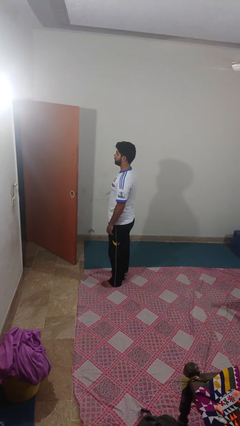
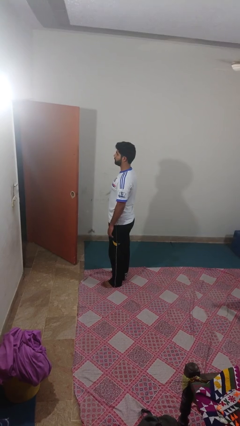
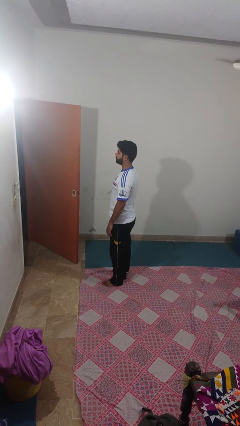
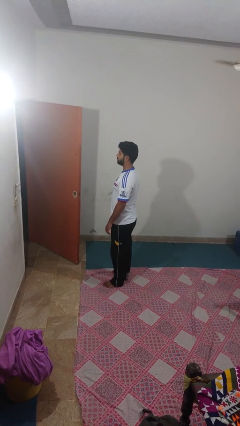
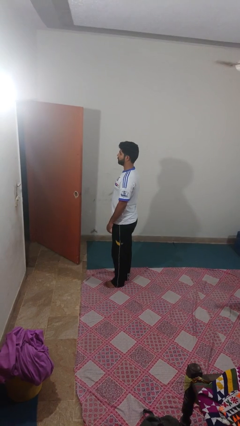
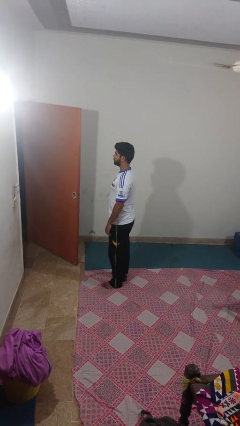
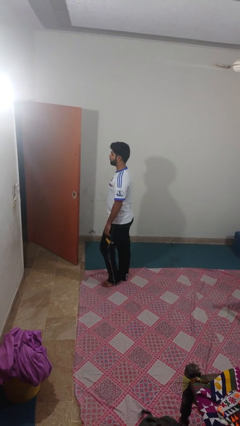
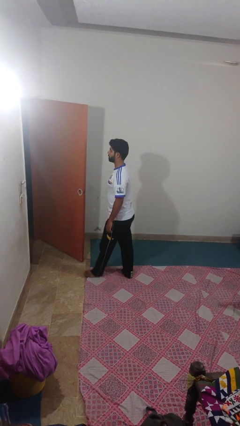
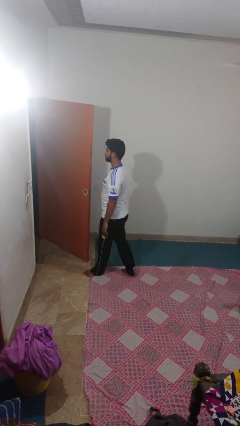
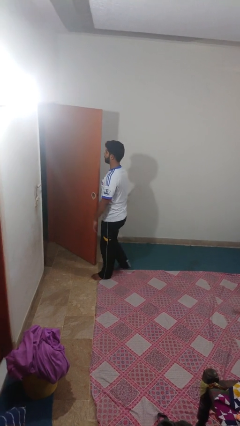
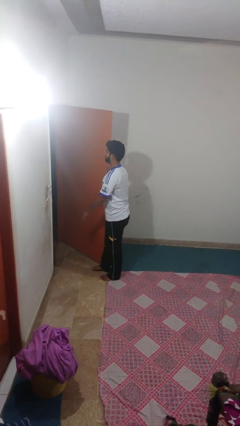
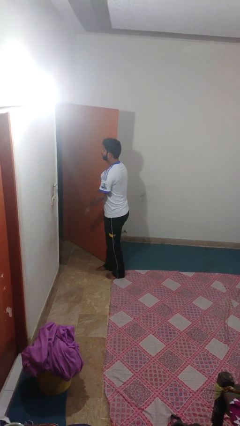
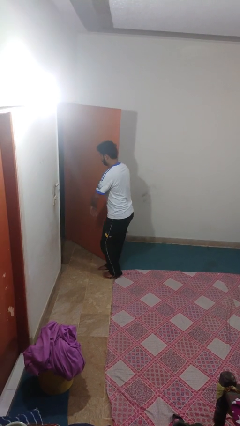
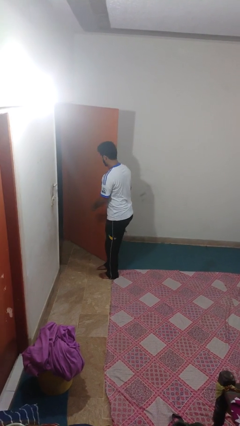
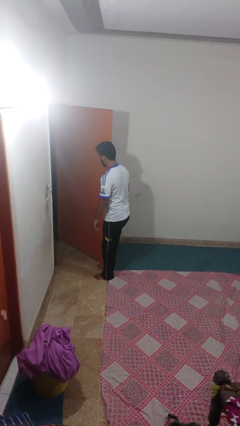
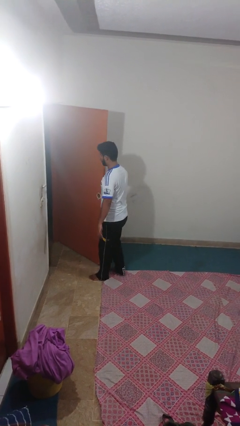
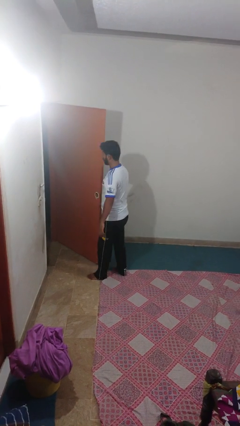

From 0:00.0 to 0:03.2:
person bumps into wall

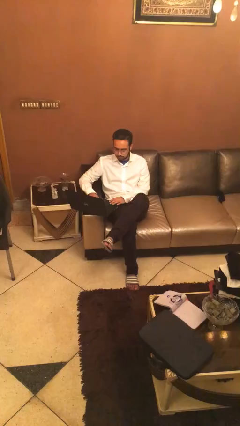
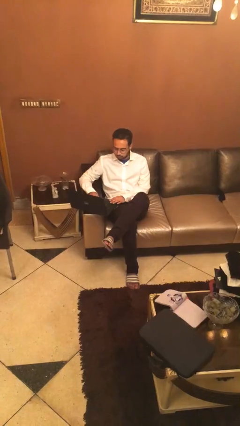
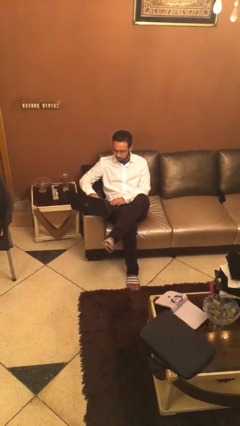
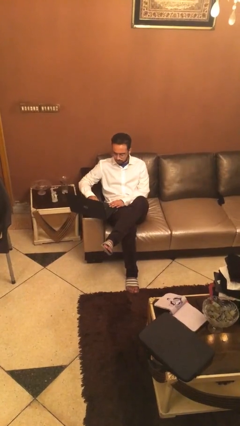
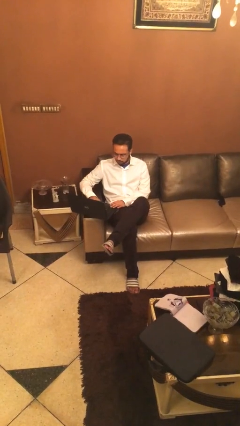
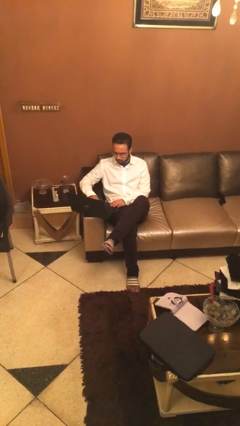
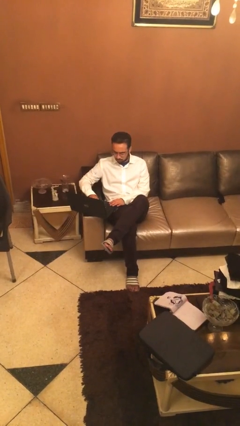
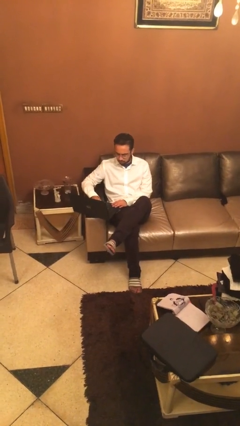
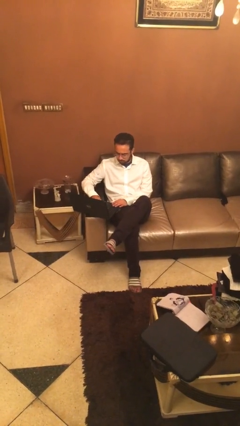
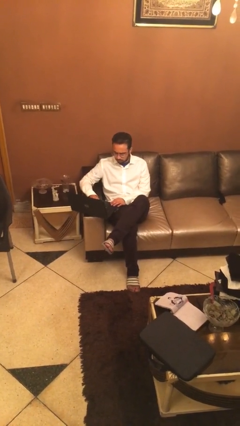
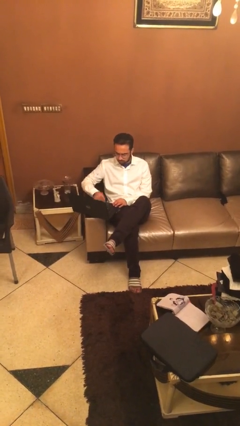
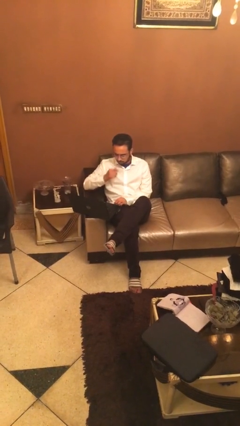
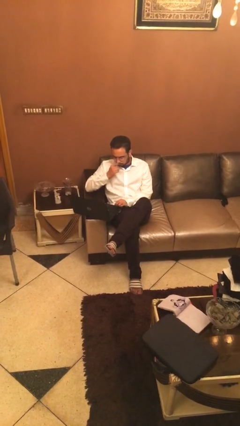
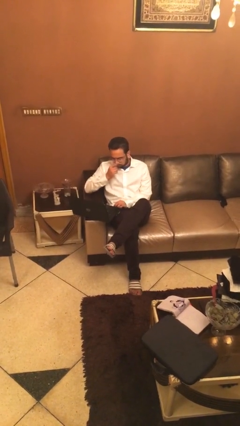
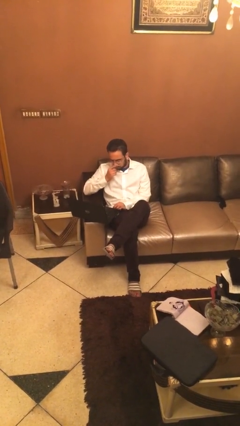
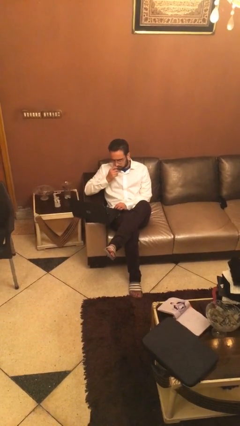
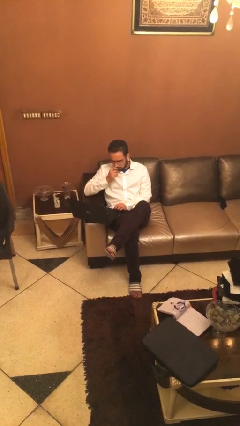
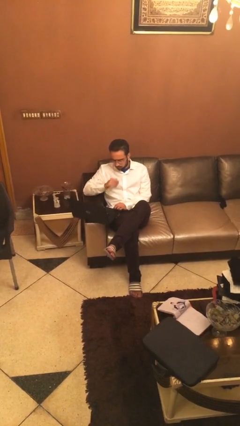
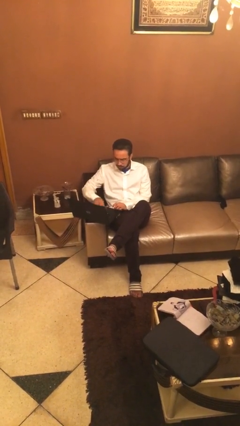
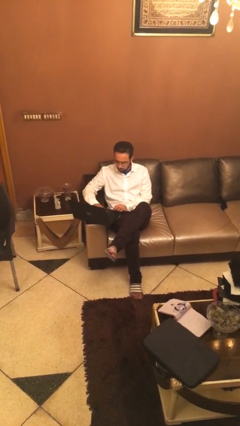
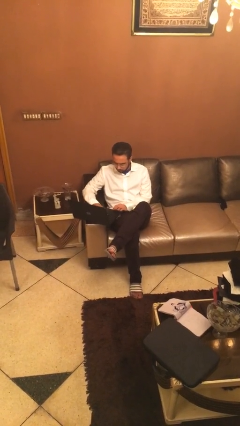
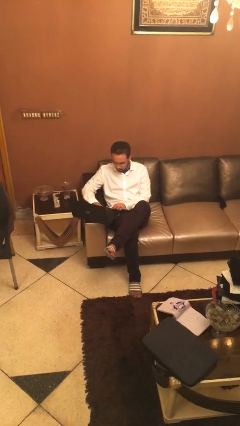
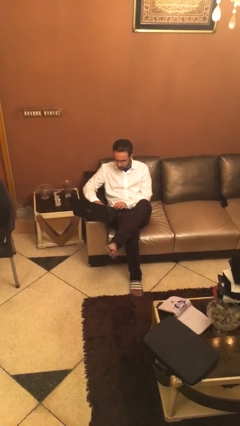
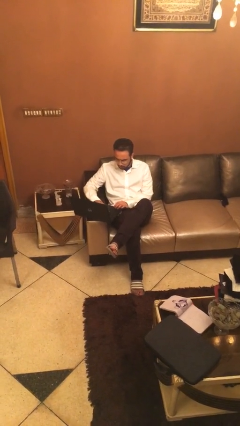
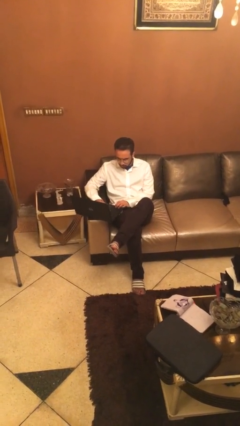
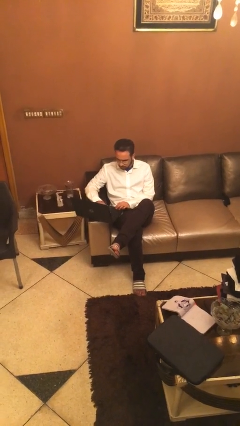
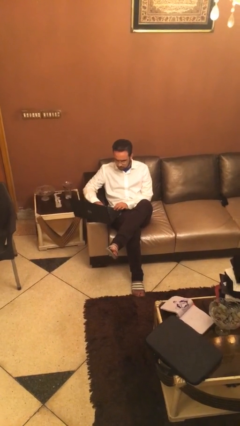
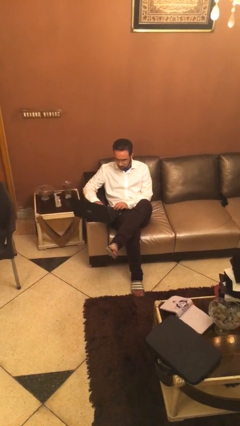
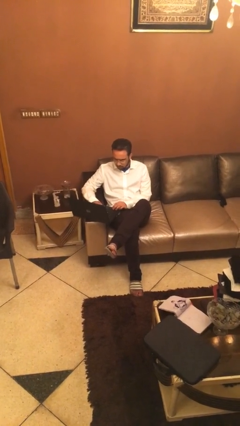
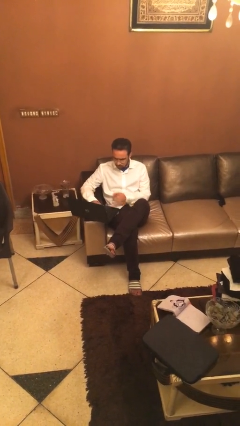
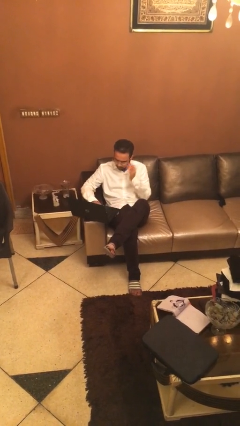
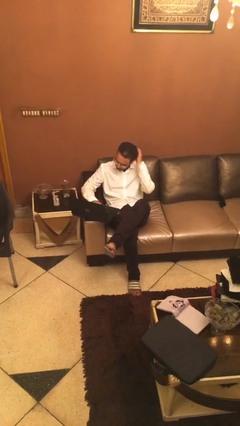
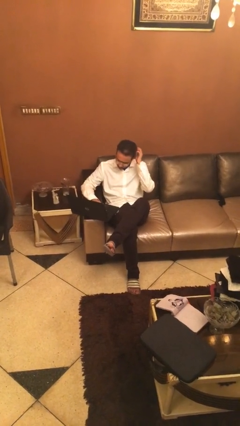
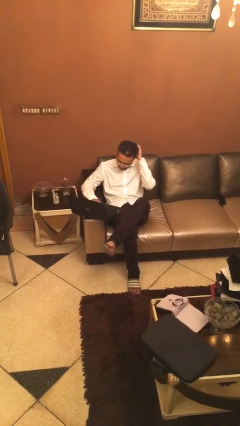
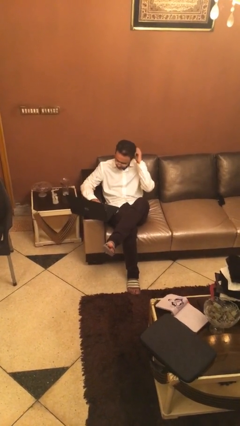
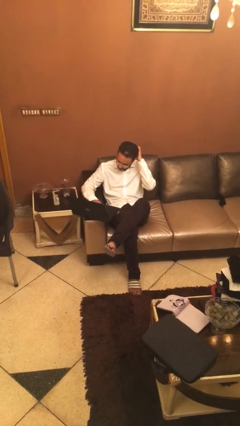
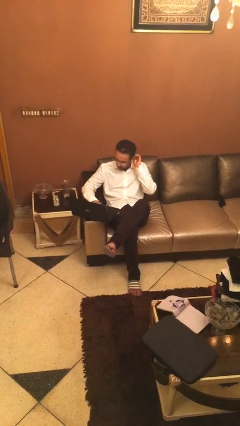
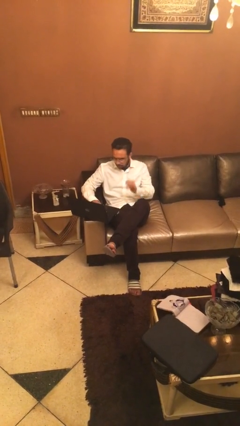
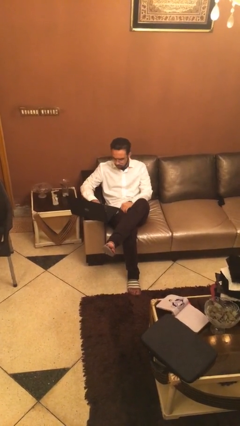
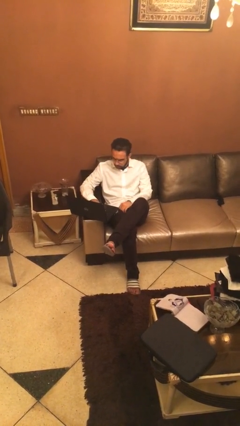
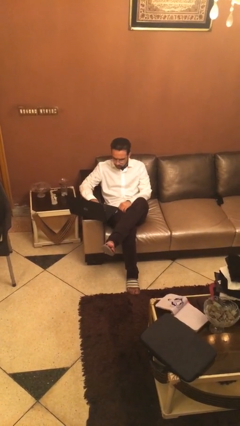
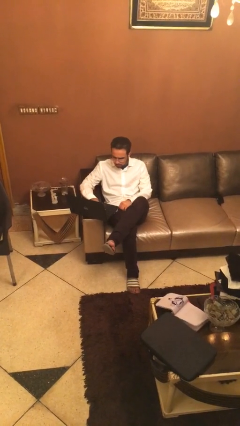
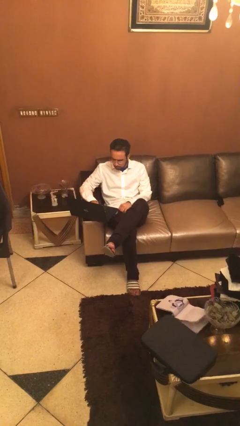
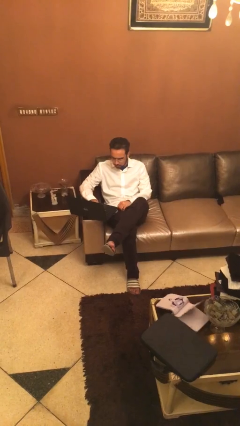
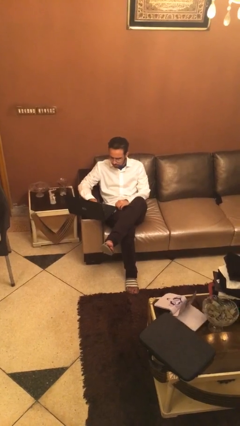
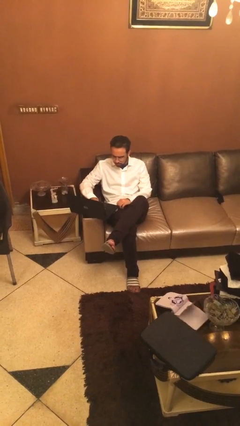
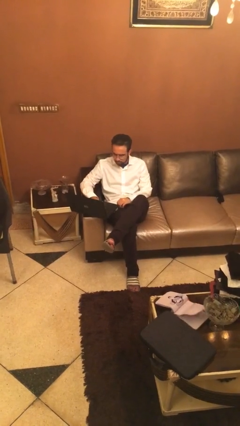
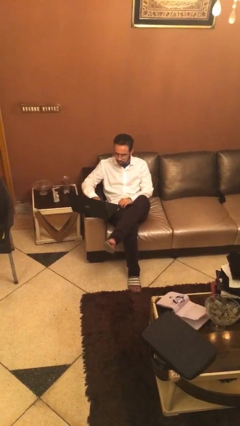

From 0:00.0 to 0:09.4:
person interacts with laptop

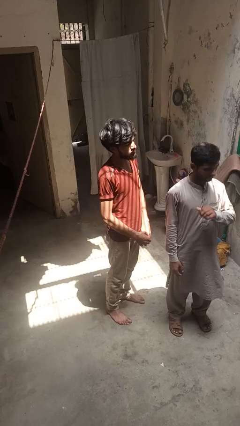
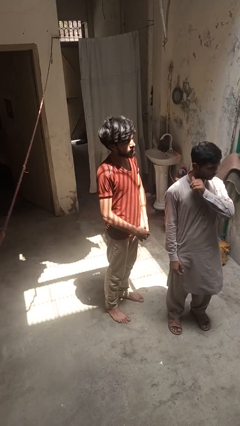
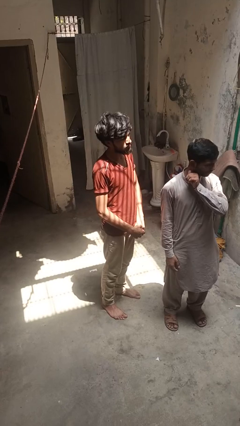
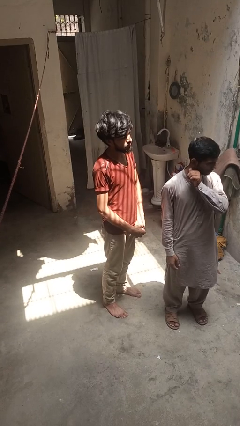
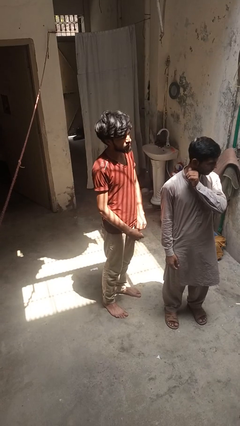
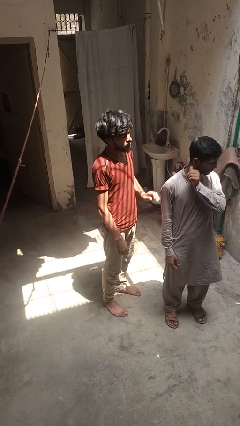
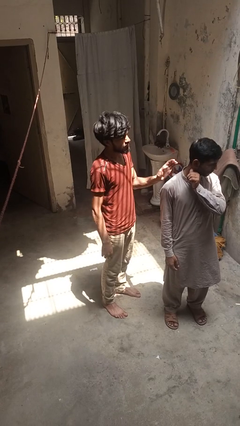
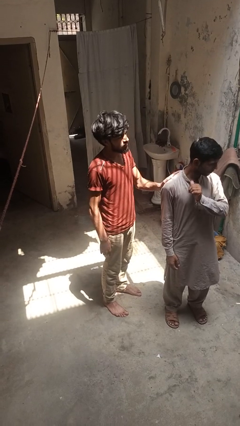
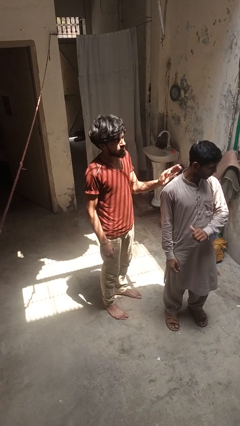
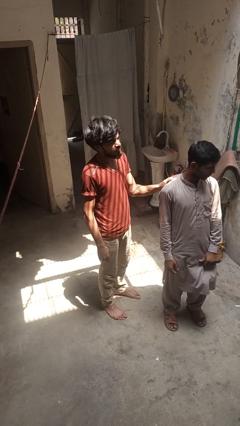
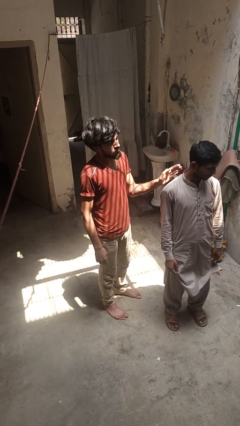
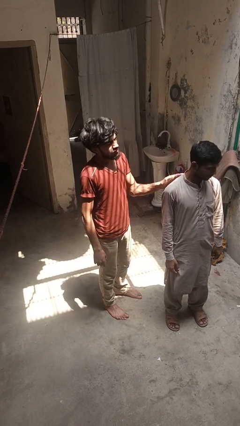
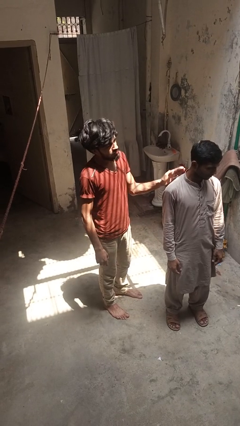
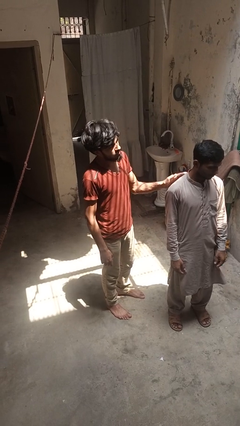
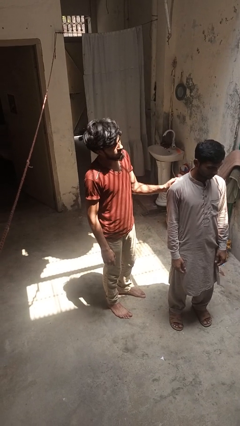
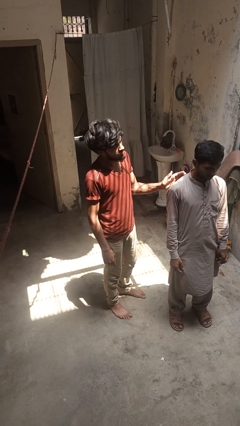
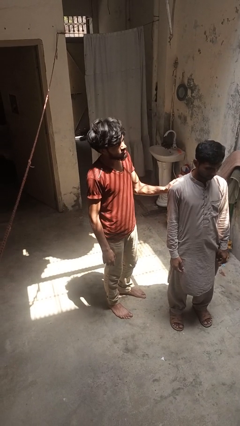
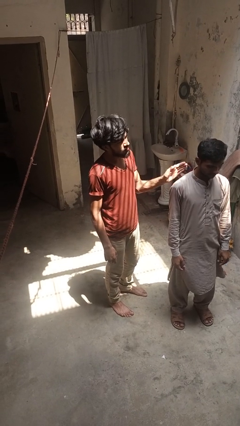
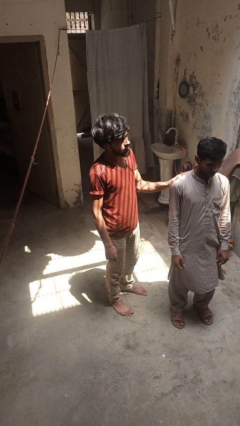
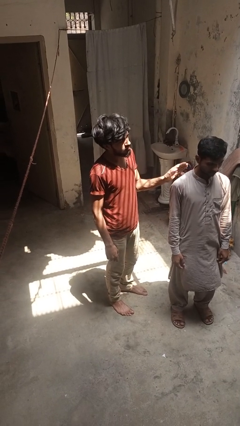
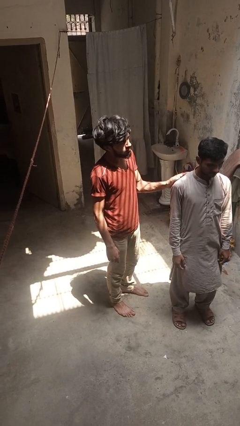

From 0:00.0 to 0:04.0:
person pounds shoulders of person

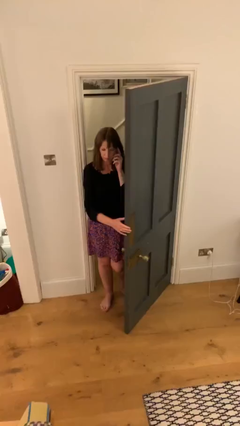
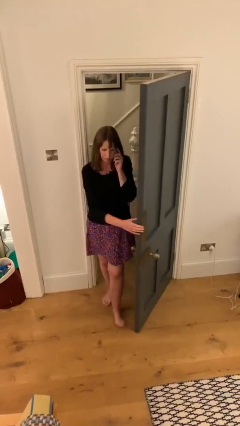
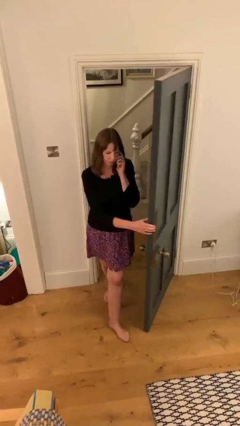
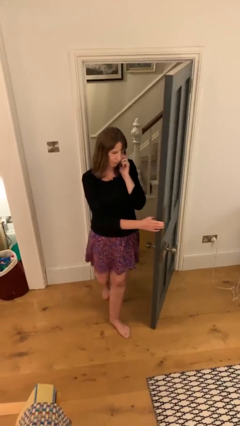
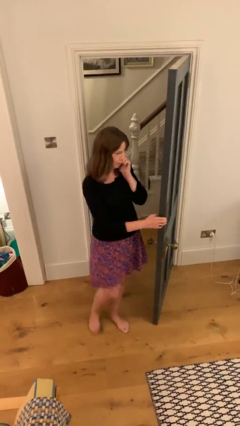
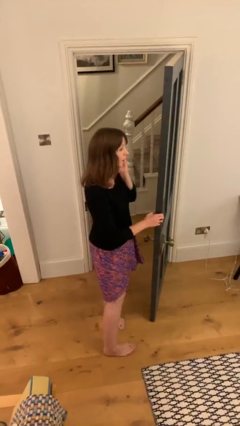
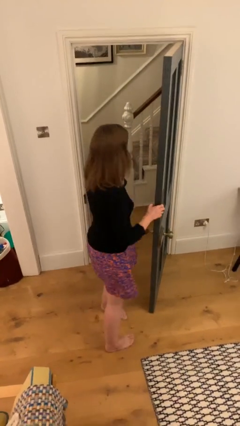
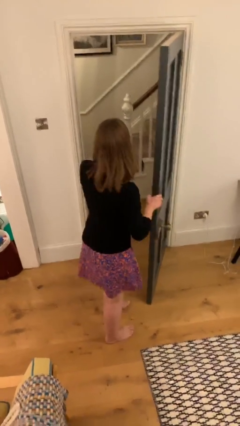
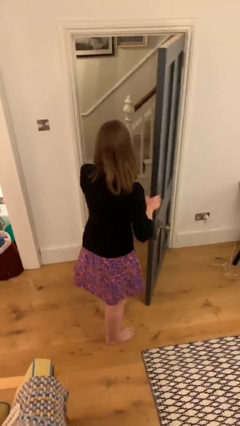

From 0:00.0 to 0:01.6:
person enters scene through structure
